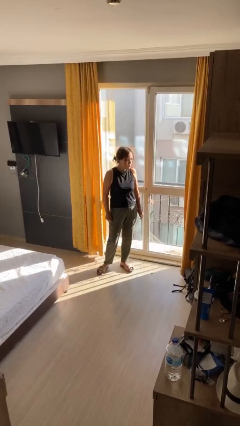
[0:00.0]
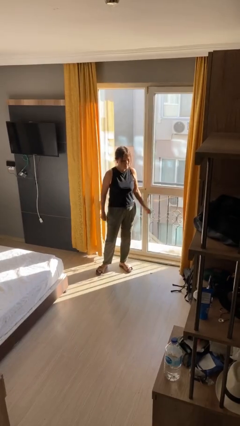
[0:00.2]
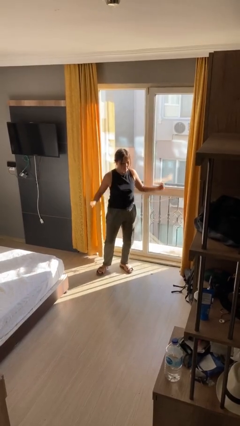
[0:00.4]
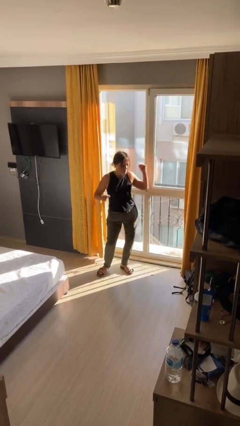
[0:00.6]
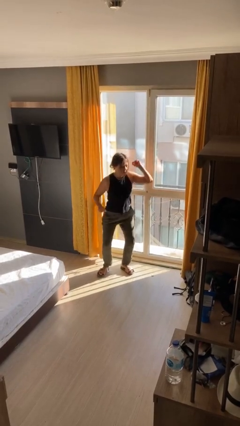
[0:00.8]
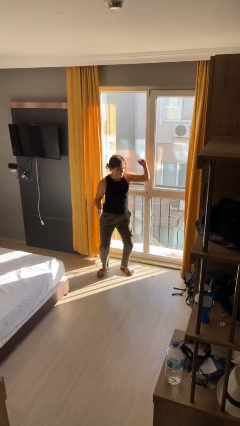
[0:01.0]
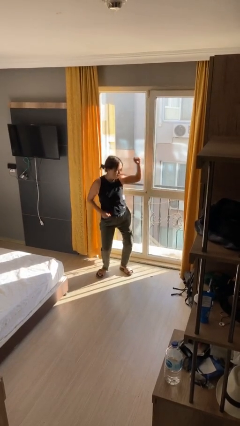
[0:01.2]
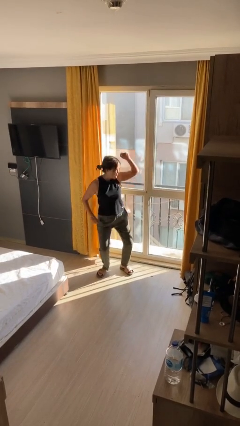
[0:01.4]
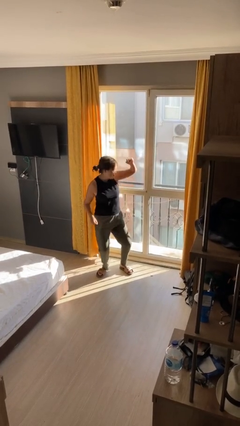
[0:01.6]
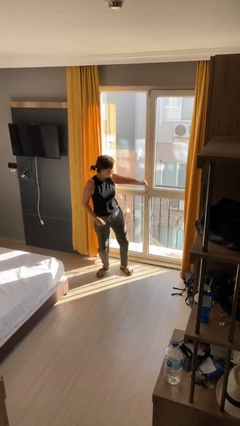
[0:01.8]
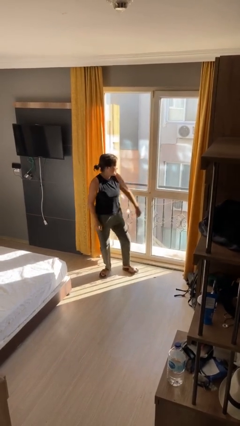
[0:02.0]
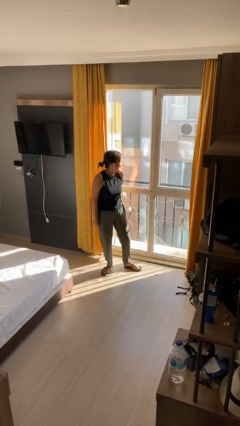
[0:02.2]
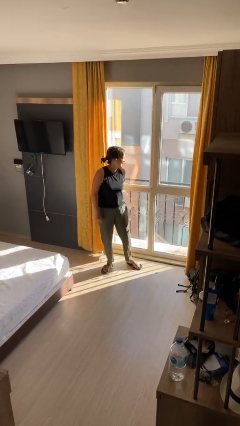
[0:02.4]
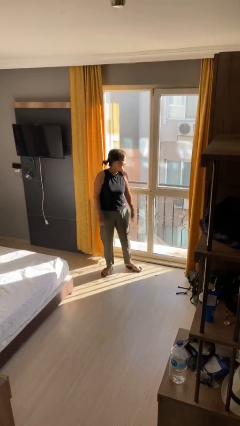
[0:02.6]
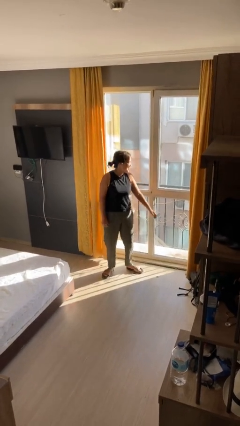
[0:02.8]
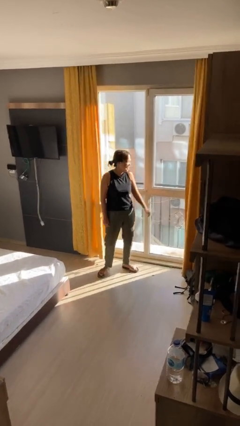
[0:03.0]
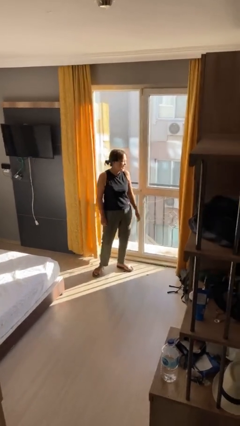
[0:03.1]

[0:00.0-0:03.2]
person dances in place

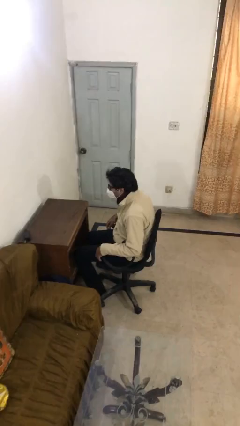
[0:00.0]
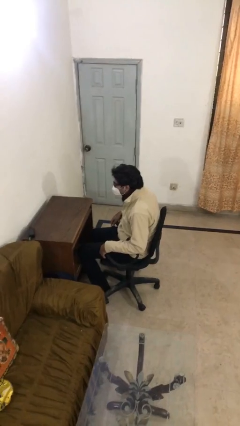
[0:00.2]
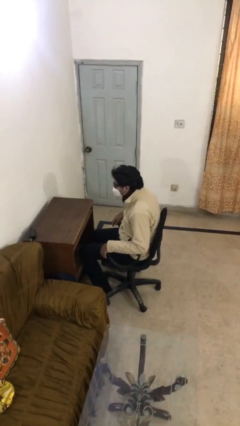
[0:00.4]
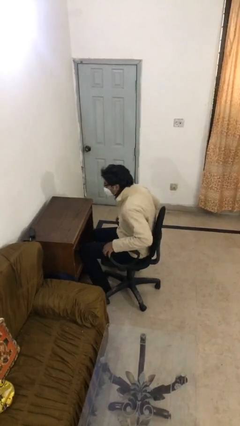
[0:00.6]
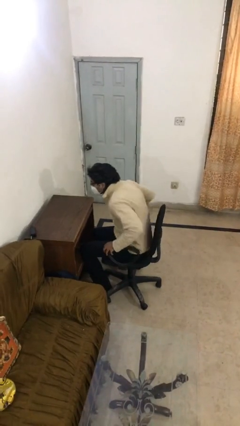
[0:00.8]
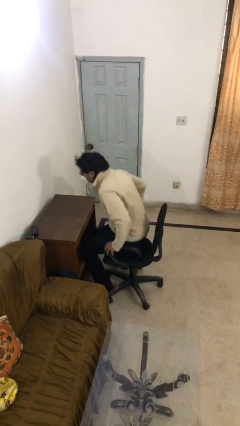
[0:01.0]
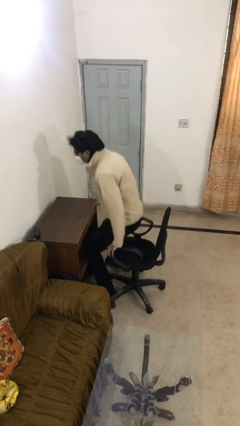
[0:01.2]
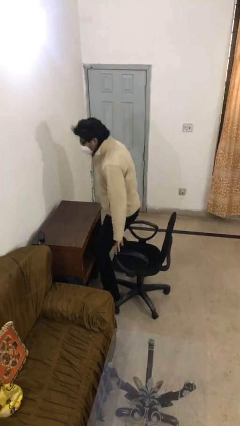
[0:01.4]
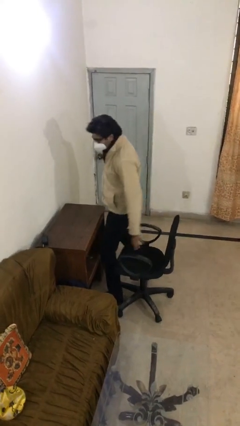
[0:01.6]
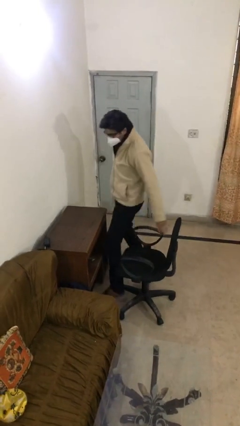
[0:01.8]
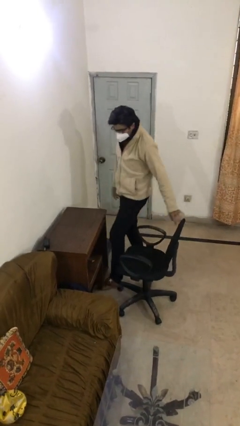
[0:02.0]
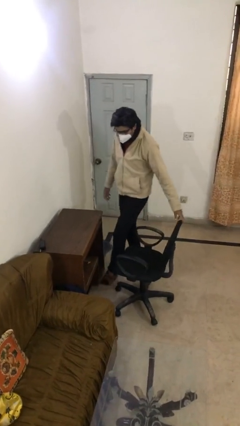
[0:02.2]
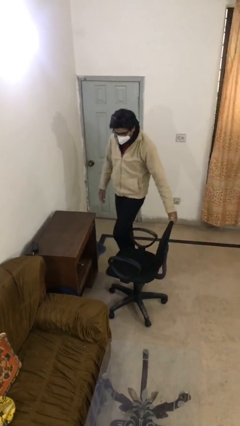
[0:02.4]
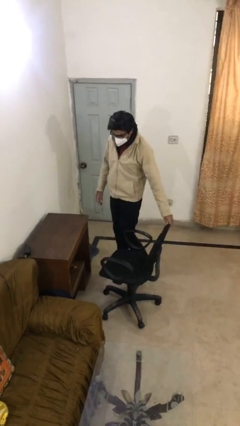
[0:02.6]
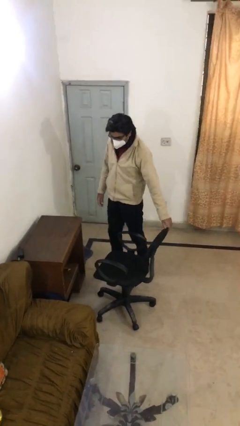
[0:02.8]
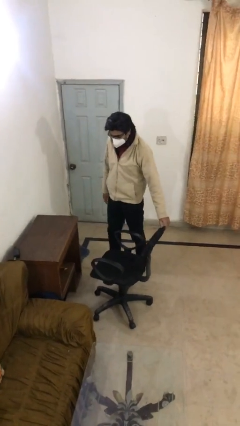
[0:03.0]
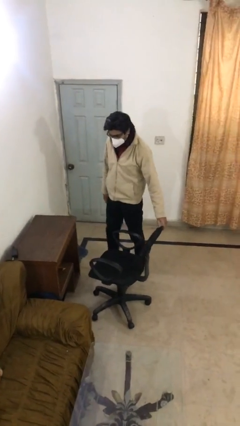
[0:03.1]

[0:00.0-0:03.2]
person stands up

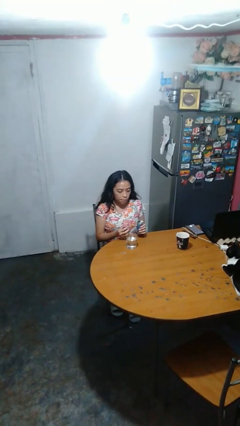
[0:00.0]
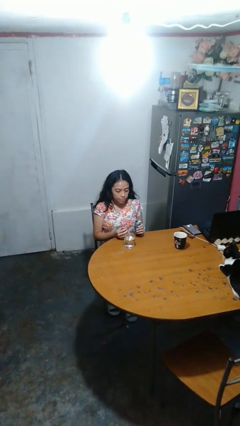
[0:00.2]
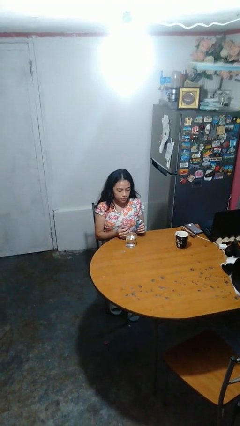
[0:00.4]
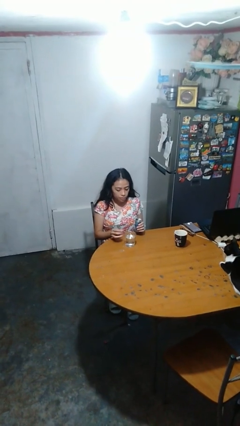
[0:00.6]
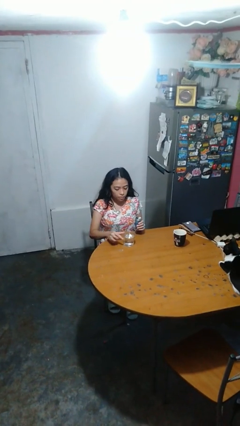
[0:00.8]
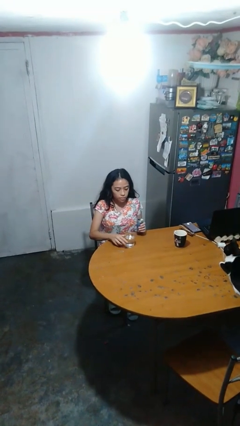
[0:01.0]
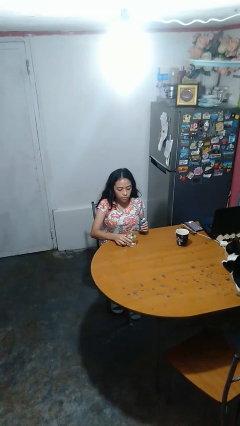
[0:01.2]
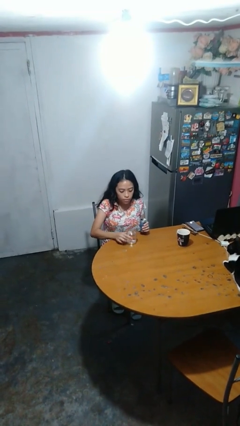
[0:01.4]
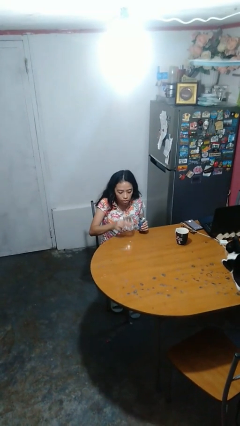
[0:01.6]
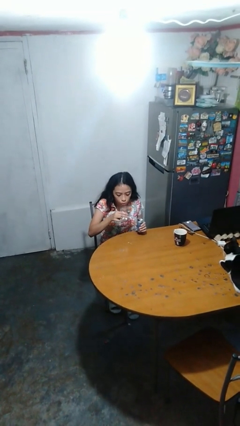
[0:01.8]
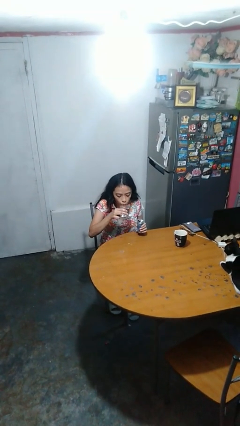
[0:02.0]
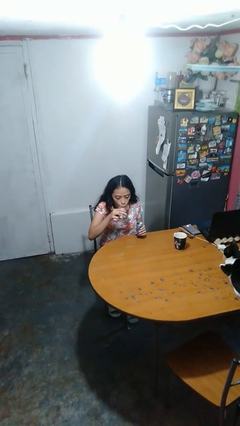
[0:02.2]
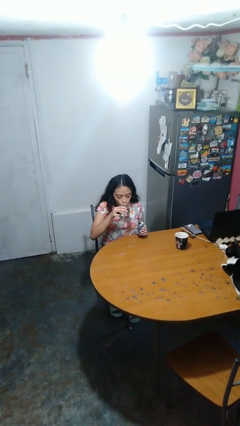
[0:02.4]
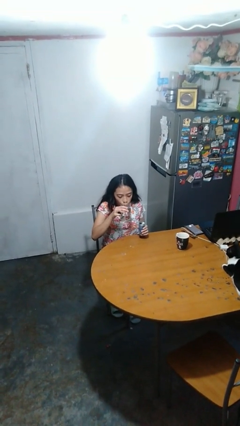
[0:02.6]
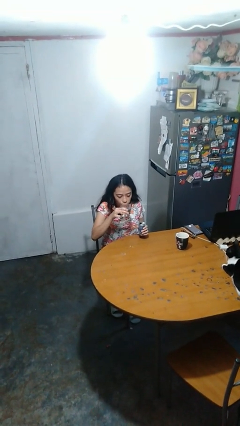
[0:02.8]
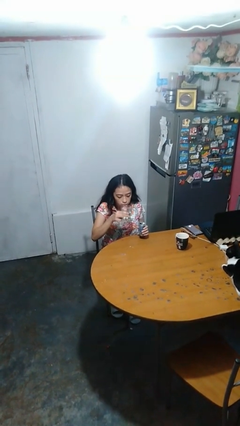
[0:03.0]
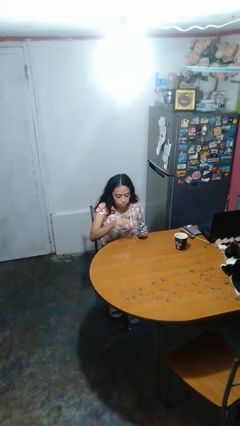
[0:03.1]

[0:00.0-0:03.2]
person drinks from cup

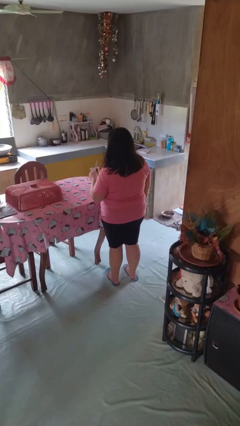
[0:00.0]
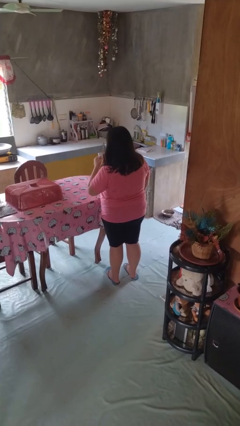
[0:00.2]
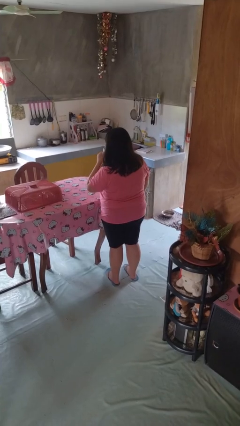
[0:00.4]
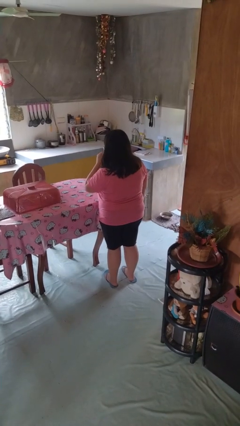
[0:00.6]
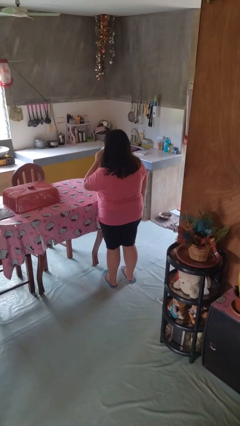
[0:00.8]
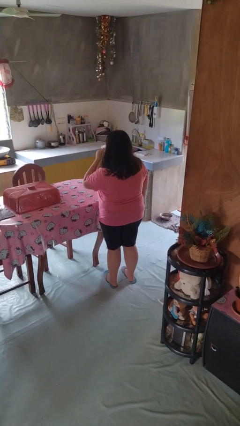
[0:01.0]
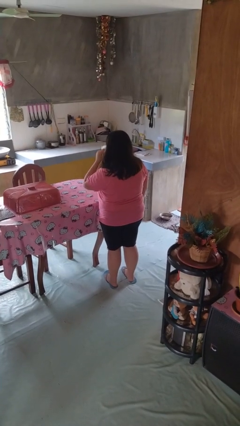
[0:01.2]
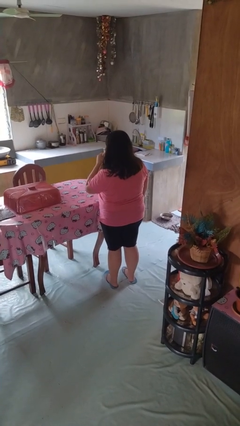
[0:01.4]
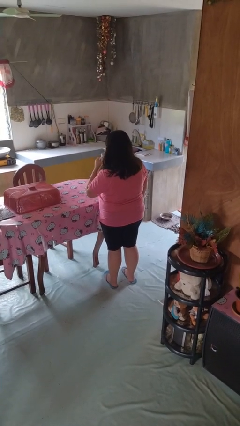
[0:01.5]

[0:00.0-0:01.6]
person drinks from mug

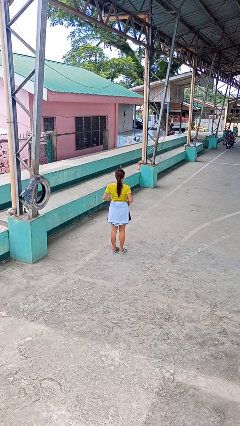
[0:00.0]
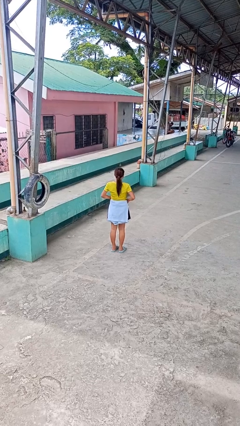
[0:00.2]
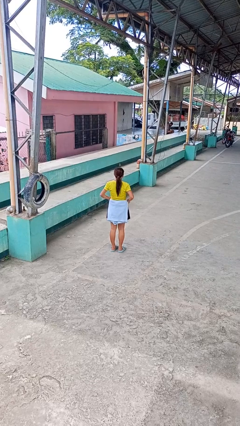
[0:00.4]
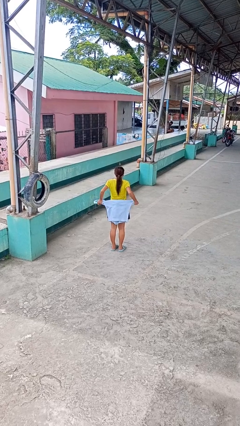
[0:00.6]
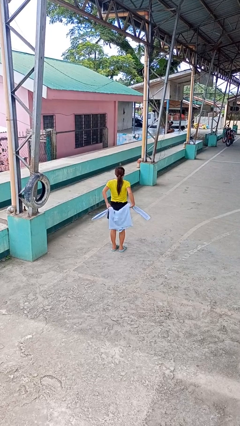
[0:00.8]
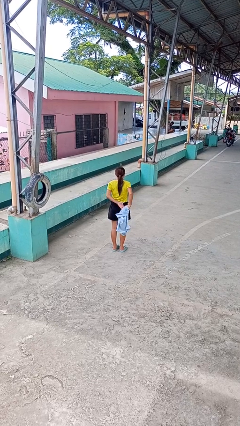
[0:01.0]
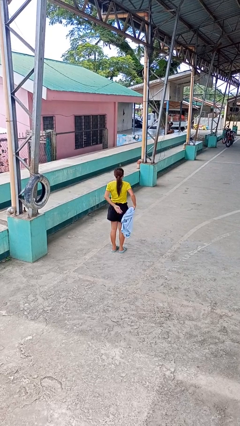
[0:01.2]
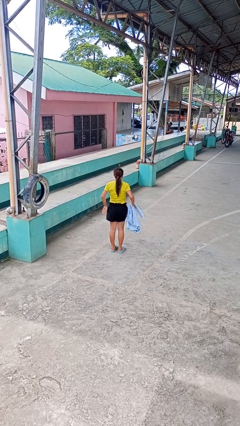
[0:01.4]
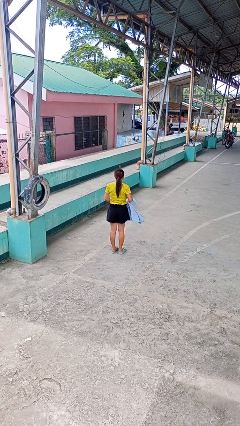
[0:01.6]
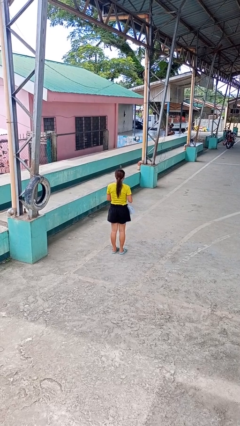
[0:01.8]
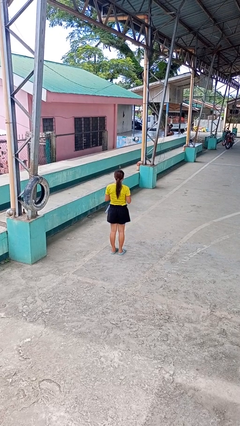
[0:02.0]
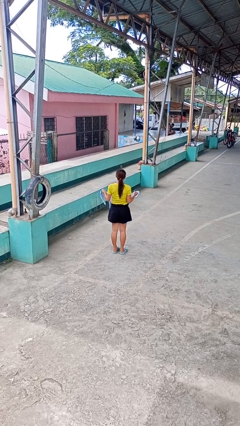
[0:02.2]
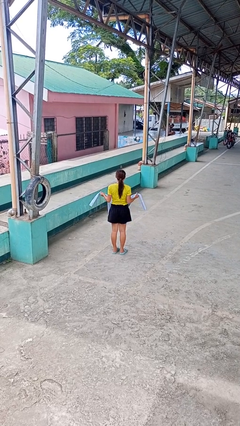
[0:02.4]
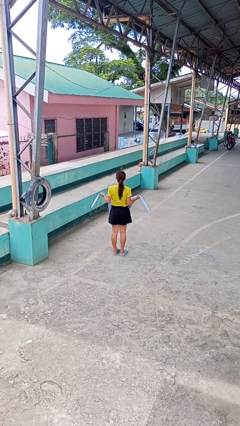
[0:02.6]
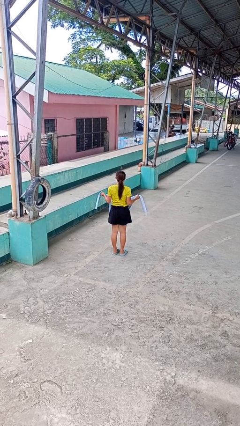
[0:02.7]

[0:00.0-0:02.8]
person unties jacket around waist

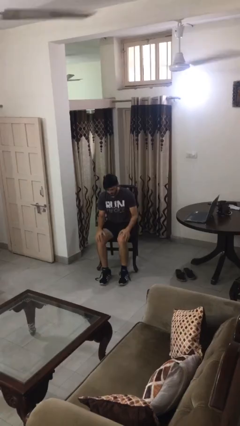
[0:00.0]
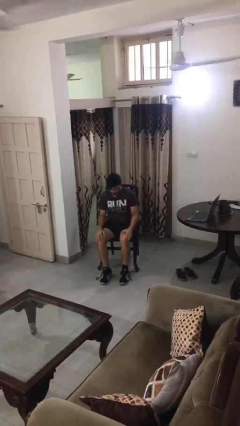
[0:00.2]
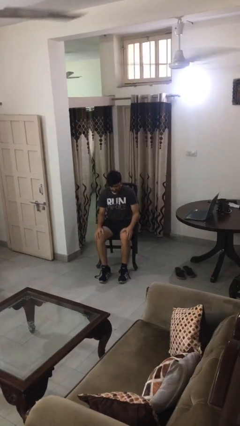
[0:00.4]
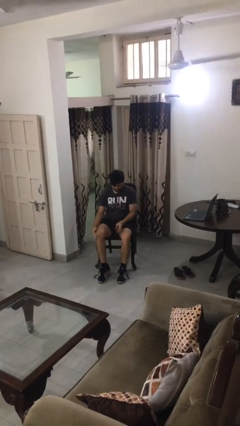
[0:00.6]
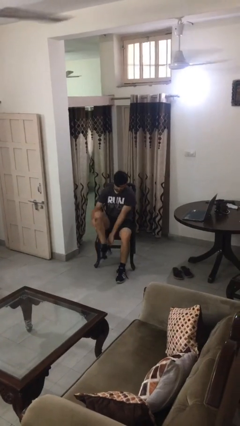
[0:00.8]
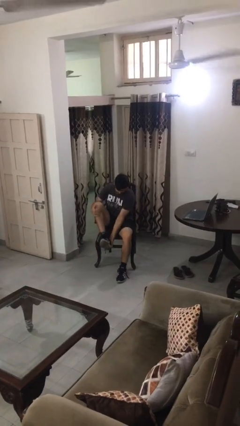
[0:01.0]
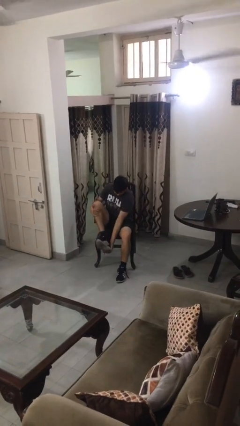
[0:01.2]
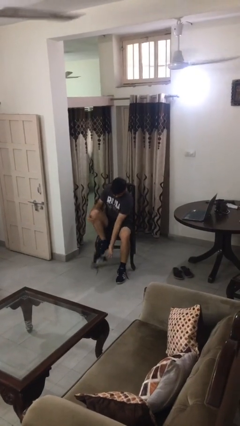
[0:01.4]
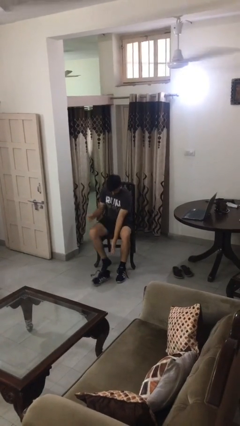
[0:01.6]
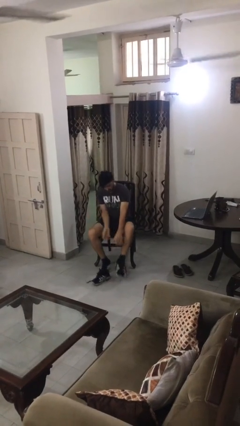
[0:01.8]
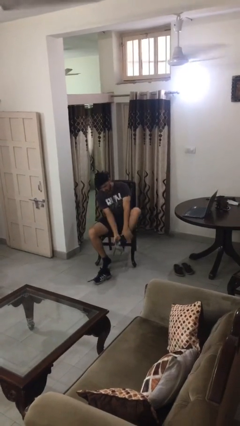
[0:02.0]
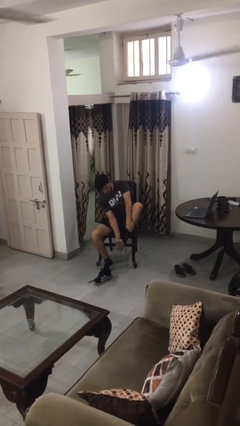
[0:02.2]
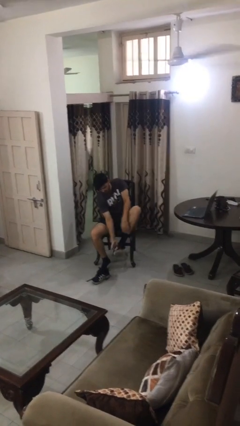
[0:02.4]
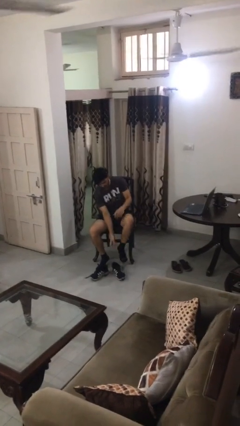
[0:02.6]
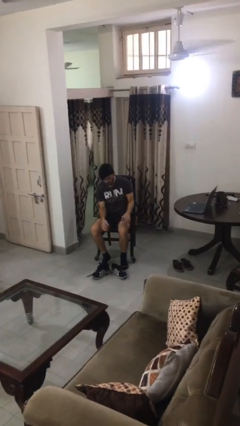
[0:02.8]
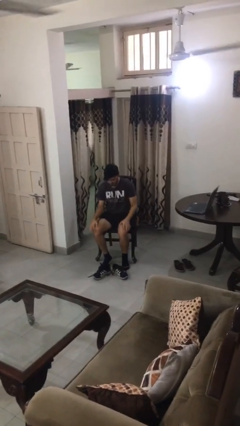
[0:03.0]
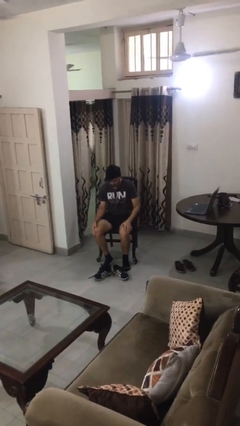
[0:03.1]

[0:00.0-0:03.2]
person takes off shoes

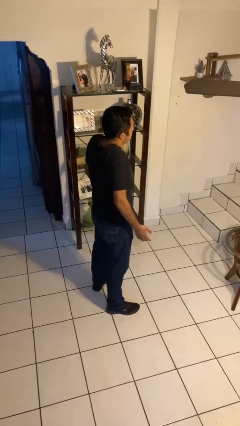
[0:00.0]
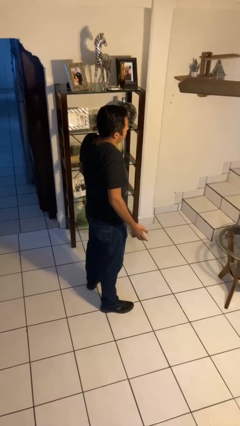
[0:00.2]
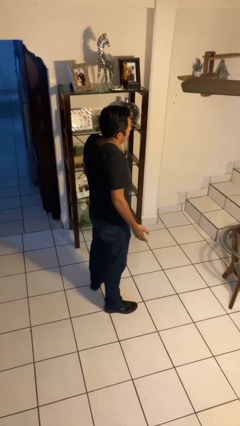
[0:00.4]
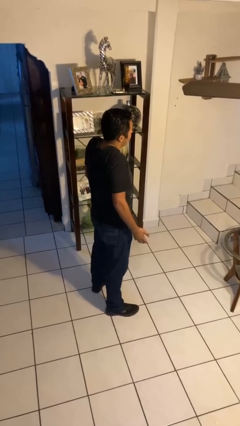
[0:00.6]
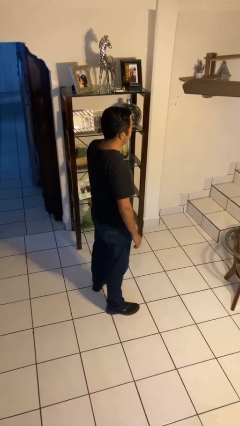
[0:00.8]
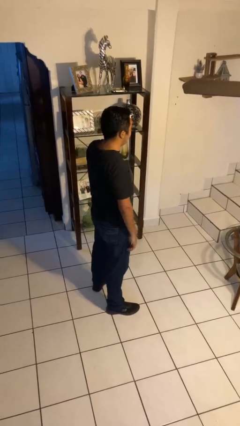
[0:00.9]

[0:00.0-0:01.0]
person shrugs
